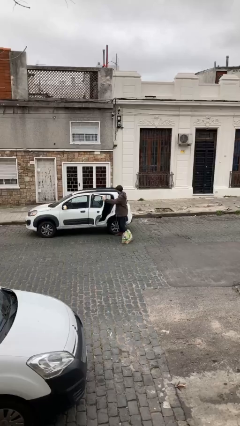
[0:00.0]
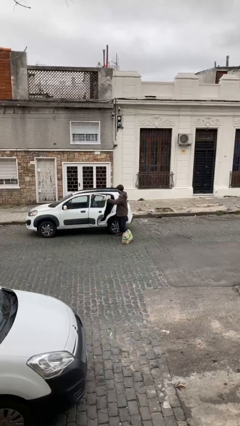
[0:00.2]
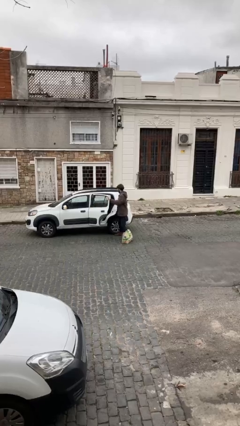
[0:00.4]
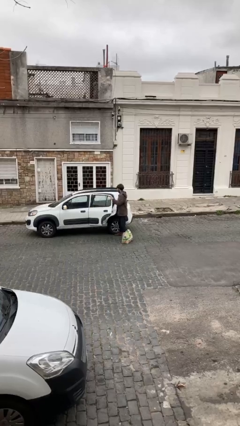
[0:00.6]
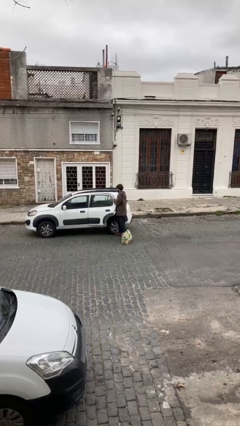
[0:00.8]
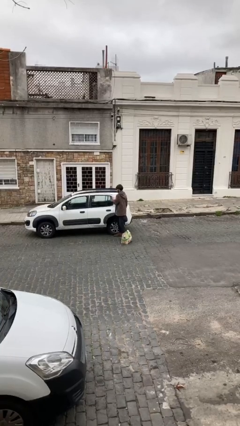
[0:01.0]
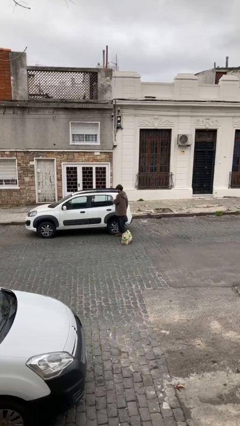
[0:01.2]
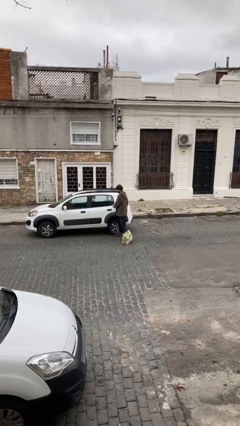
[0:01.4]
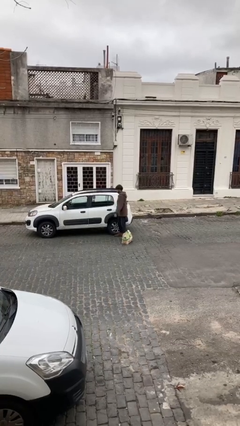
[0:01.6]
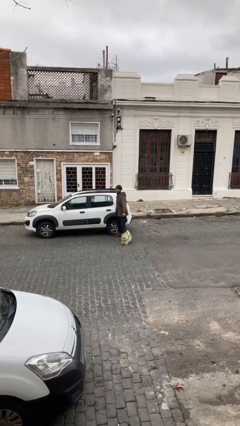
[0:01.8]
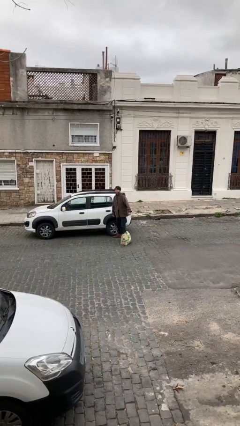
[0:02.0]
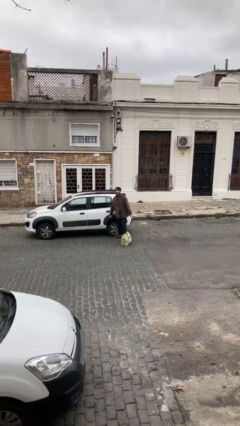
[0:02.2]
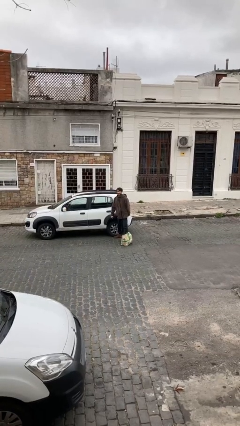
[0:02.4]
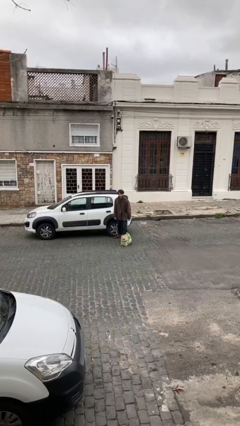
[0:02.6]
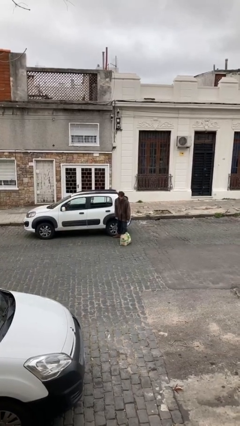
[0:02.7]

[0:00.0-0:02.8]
person closes car door

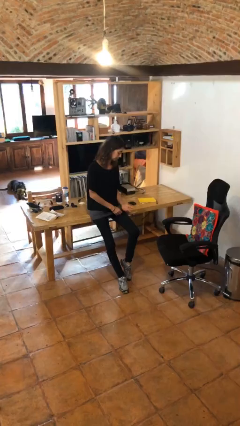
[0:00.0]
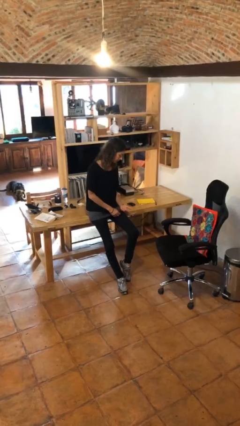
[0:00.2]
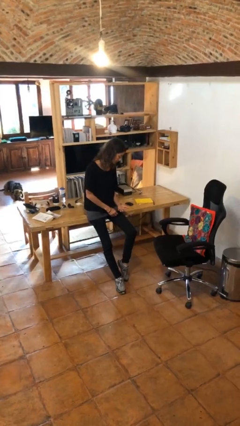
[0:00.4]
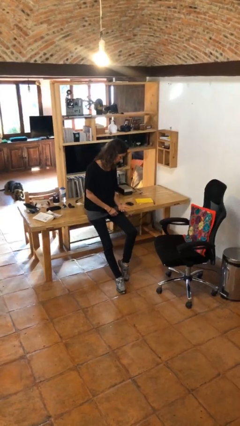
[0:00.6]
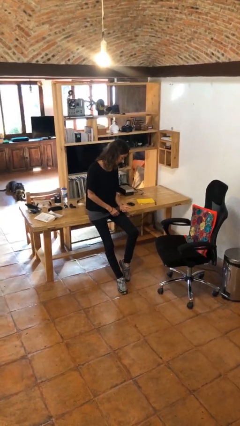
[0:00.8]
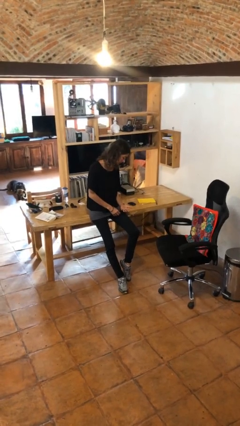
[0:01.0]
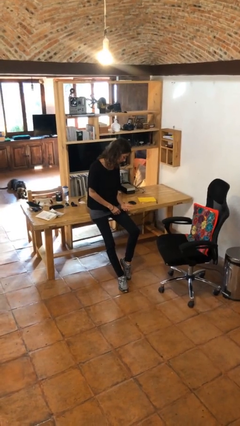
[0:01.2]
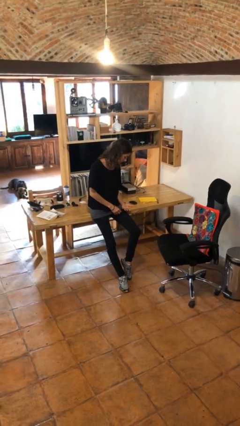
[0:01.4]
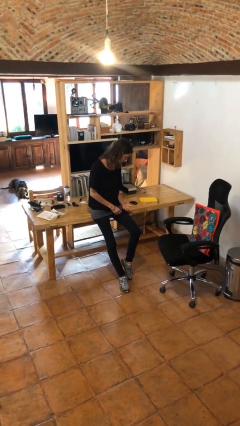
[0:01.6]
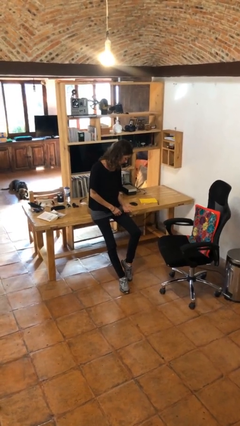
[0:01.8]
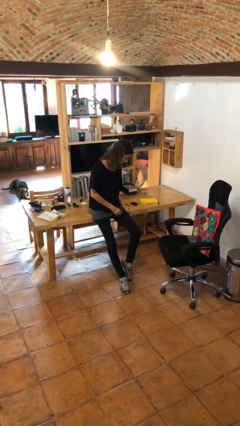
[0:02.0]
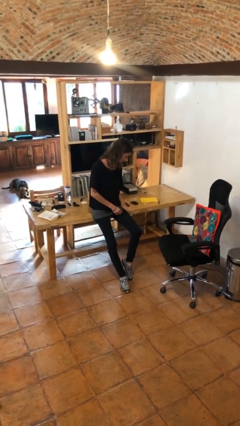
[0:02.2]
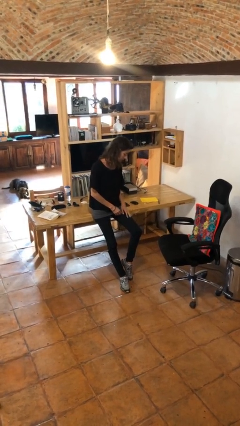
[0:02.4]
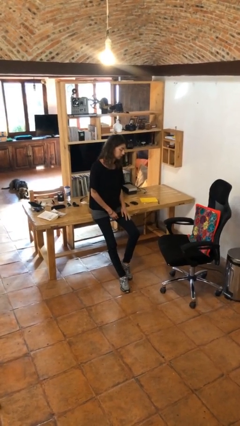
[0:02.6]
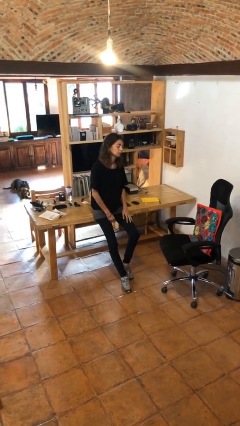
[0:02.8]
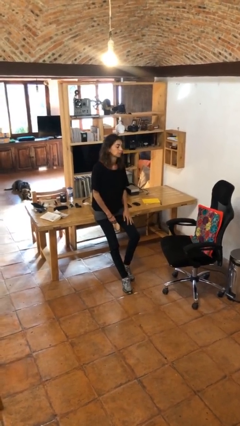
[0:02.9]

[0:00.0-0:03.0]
person looks at hands in lap

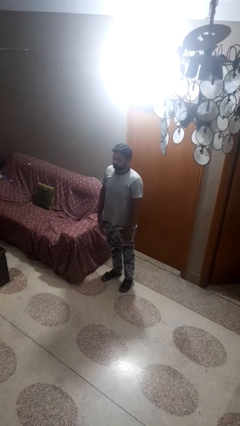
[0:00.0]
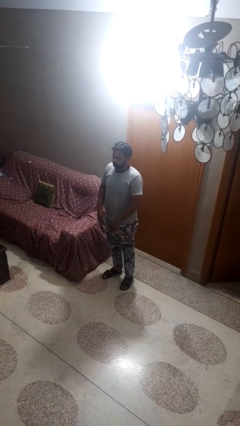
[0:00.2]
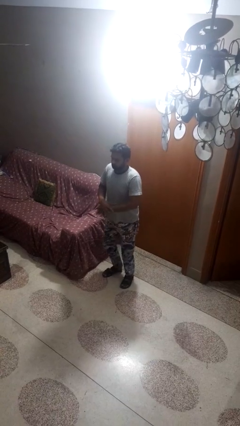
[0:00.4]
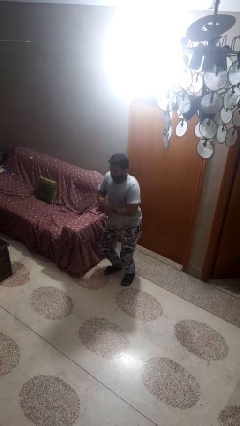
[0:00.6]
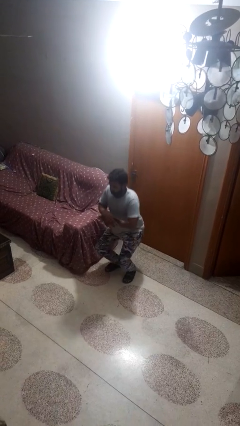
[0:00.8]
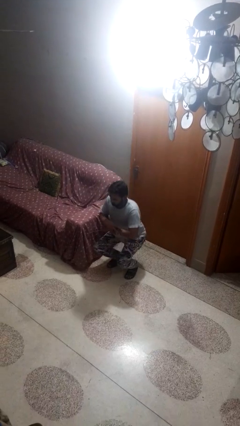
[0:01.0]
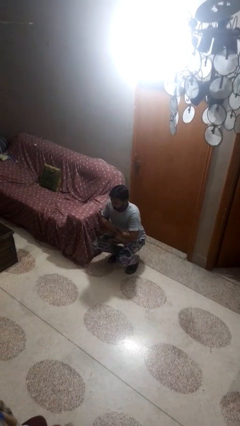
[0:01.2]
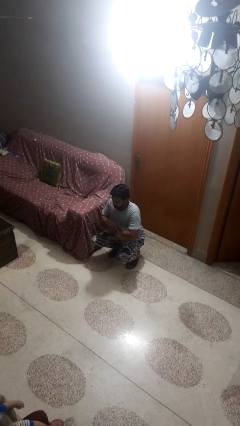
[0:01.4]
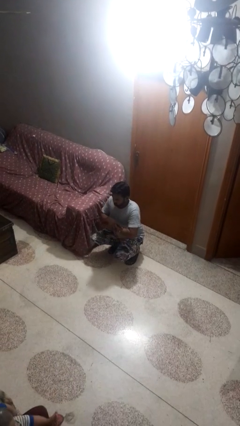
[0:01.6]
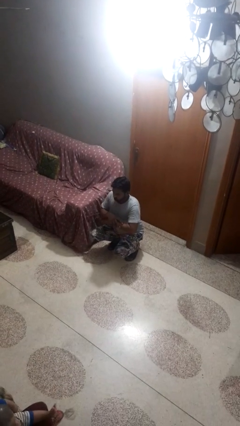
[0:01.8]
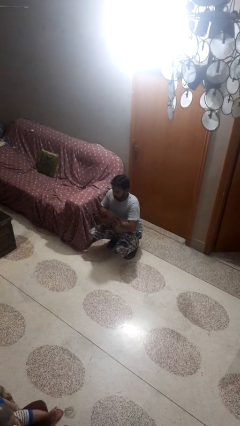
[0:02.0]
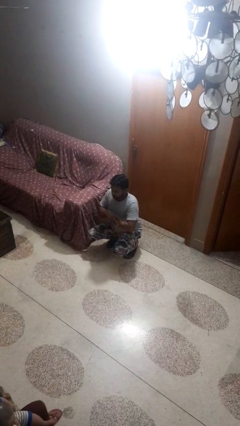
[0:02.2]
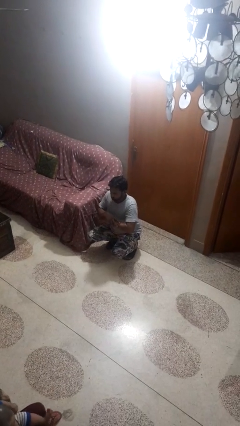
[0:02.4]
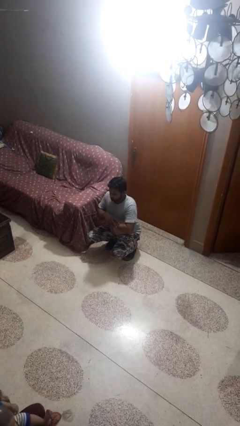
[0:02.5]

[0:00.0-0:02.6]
person squats

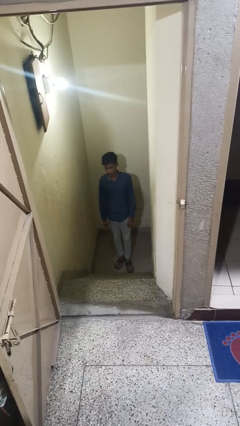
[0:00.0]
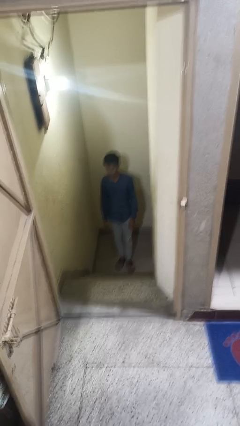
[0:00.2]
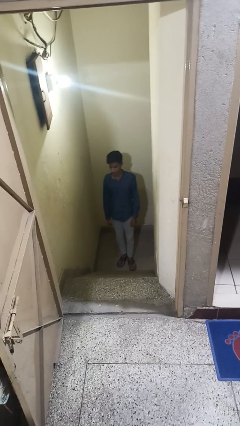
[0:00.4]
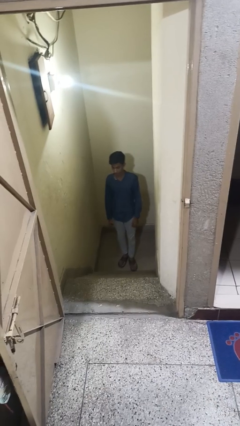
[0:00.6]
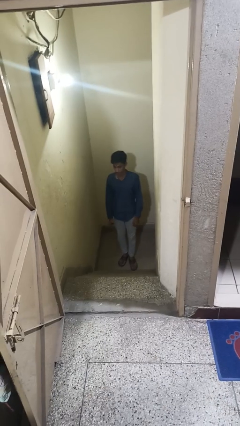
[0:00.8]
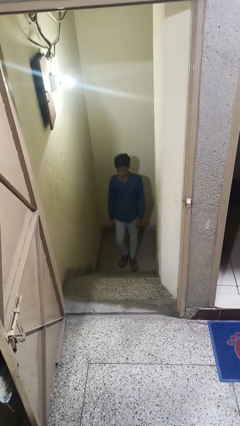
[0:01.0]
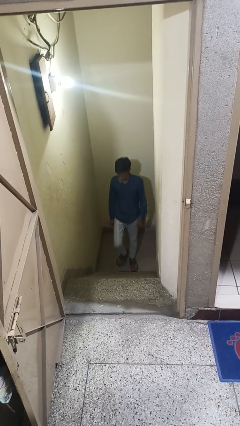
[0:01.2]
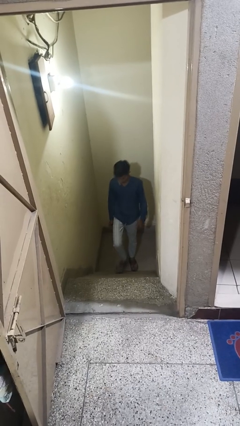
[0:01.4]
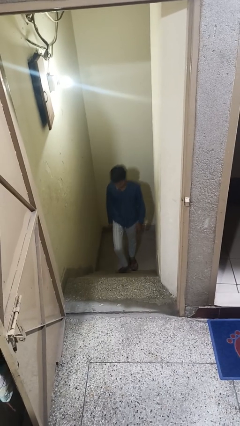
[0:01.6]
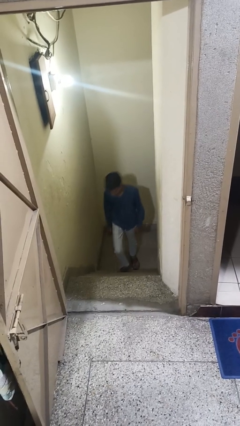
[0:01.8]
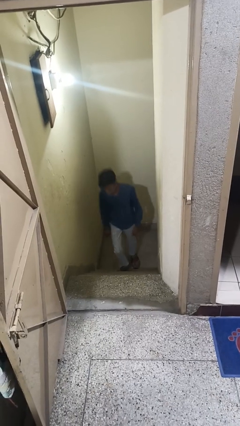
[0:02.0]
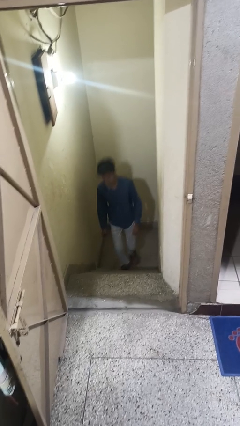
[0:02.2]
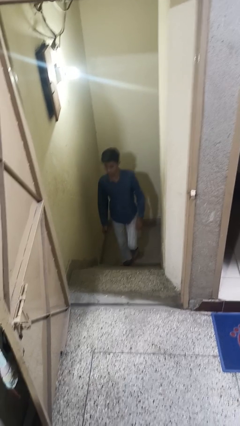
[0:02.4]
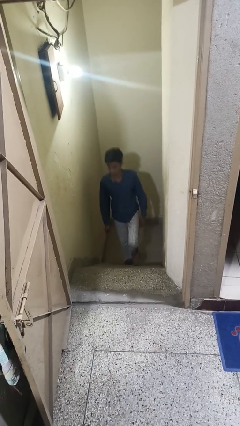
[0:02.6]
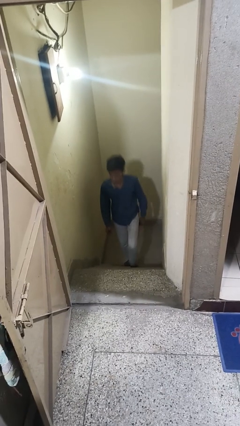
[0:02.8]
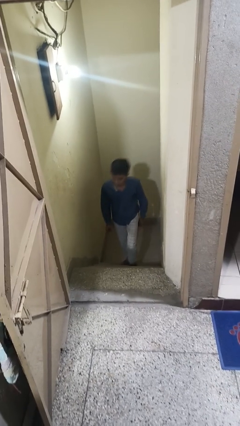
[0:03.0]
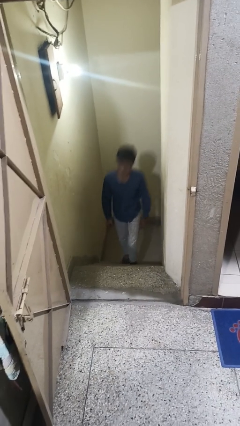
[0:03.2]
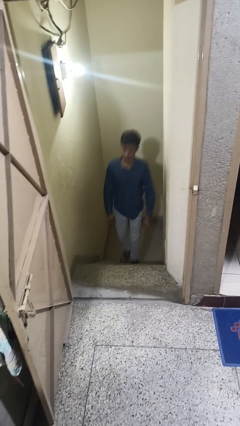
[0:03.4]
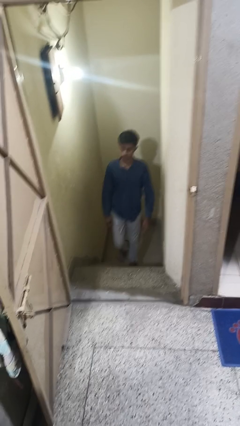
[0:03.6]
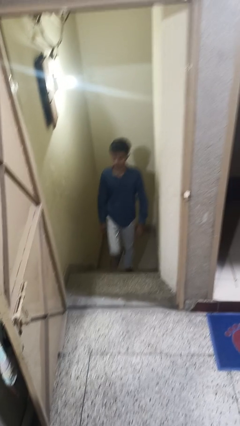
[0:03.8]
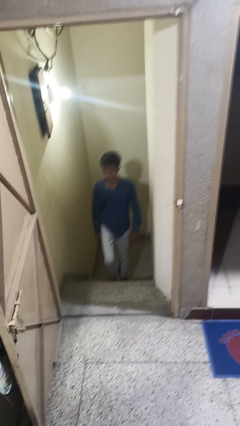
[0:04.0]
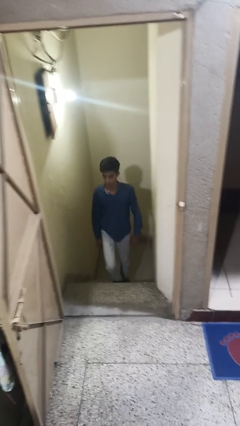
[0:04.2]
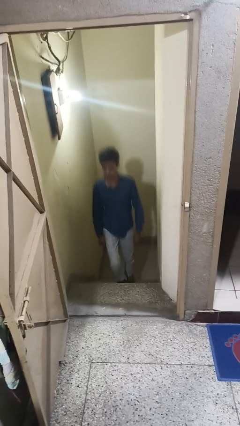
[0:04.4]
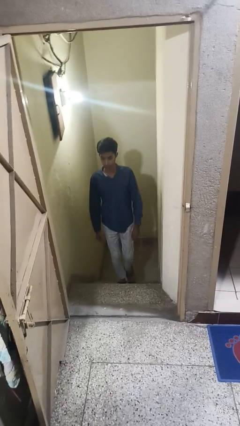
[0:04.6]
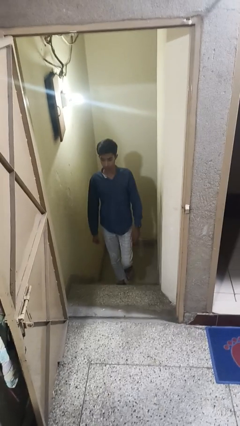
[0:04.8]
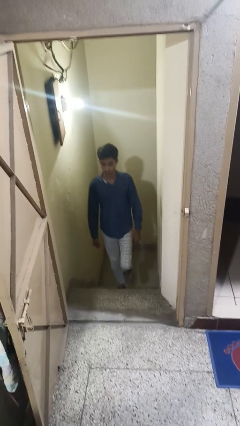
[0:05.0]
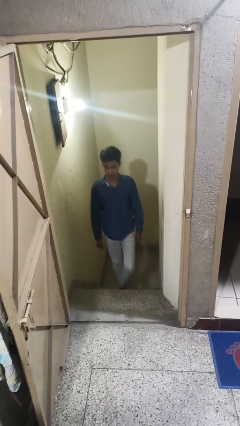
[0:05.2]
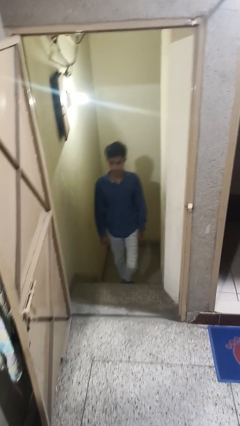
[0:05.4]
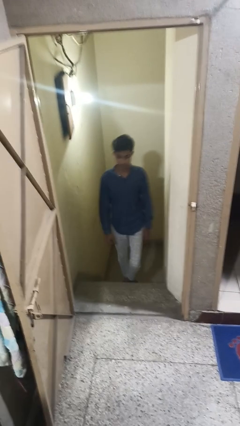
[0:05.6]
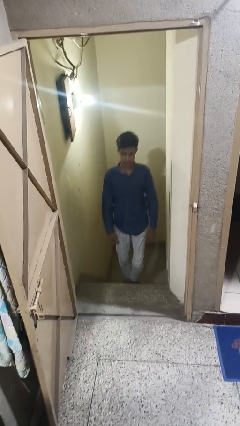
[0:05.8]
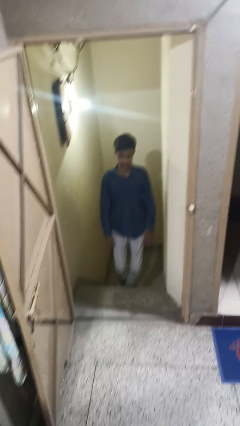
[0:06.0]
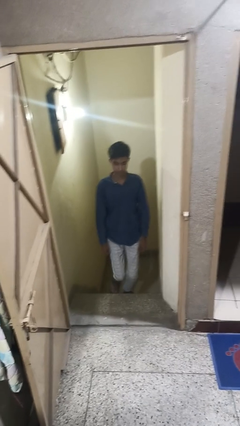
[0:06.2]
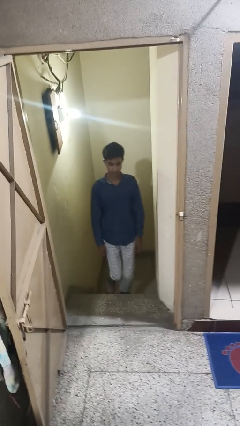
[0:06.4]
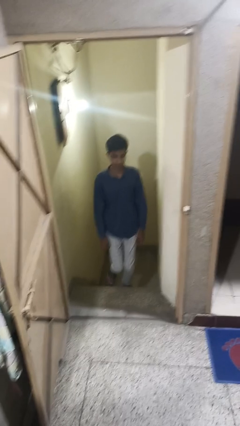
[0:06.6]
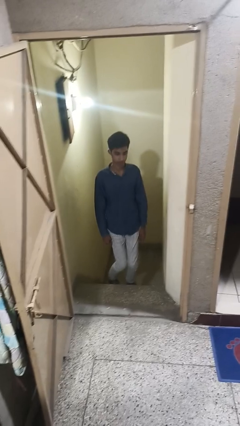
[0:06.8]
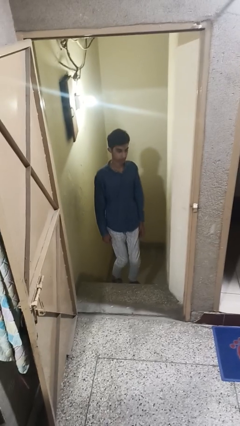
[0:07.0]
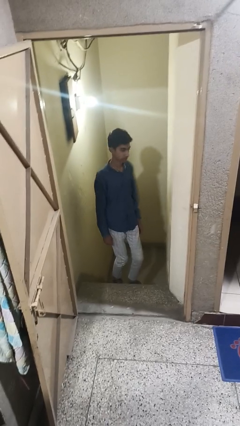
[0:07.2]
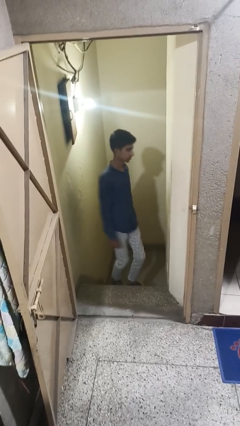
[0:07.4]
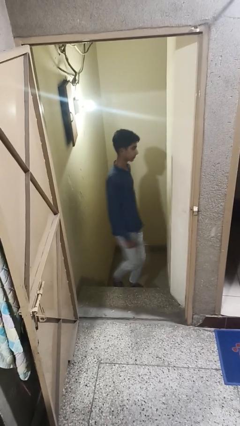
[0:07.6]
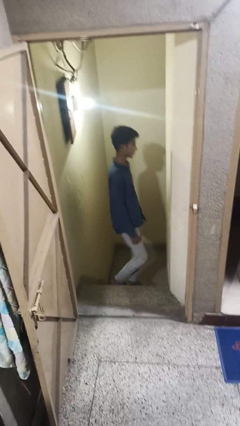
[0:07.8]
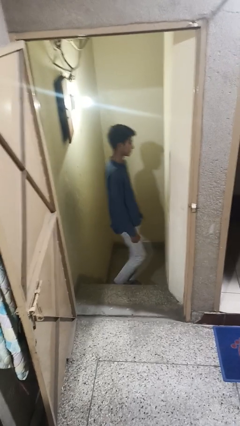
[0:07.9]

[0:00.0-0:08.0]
person climbs up stairs

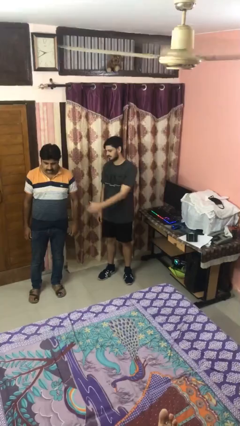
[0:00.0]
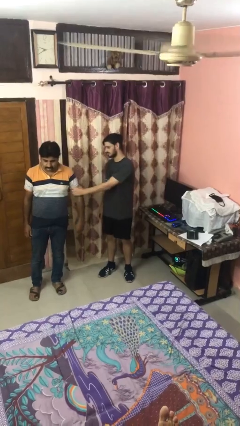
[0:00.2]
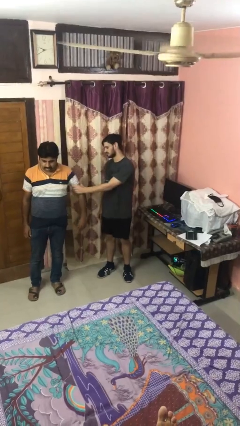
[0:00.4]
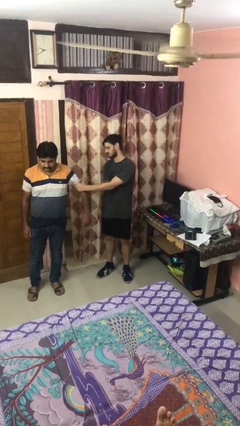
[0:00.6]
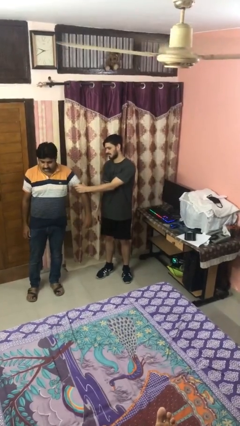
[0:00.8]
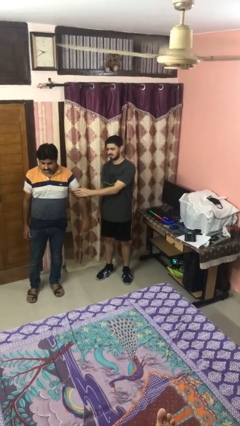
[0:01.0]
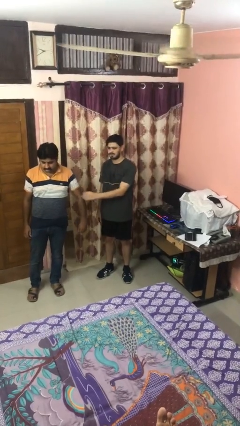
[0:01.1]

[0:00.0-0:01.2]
person grabs person by bicep
